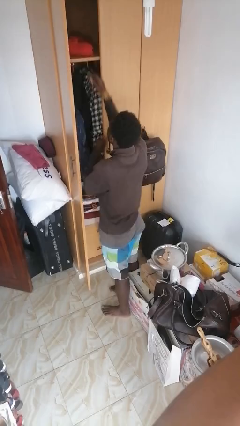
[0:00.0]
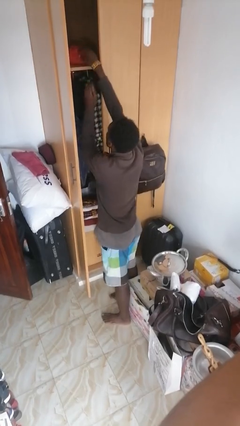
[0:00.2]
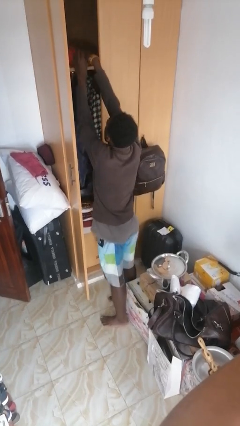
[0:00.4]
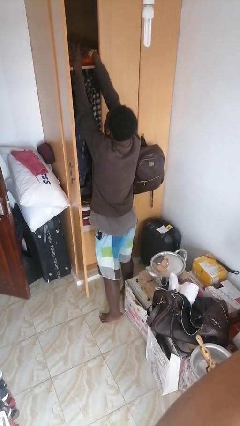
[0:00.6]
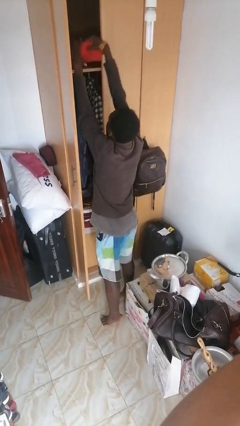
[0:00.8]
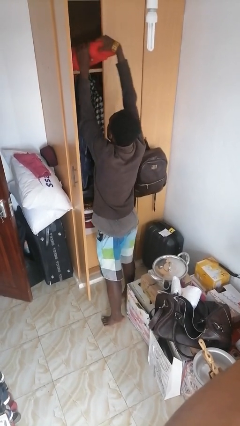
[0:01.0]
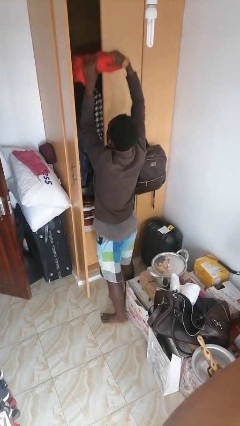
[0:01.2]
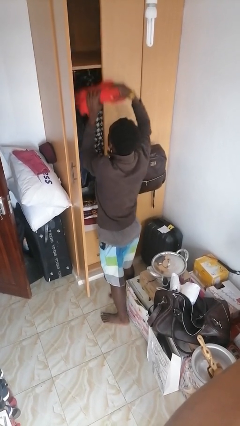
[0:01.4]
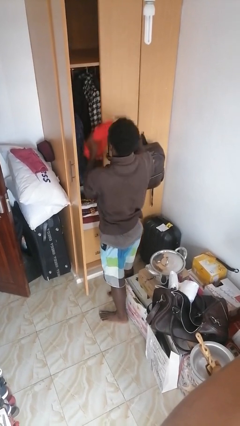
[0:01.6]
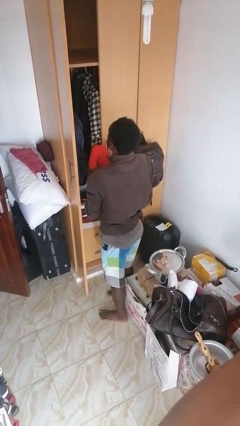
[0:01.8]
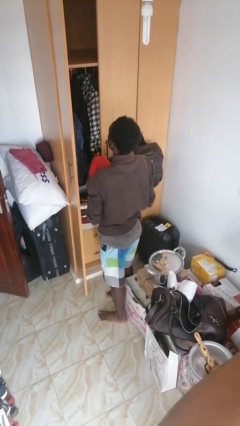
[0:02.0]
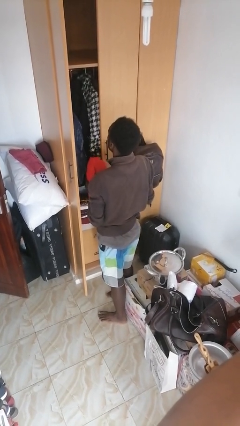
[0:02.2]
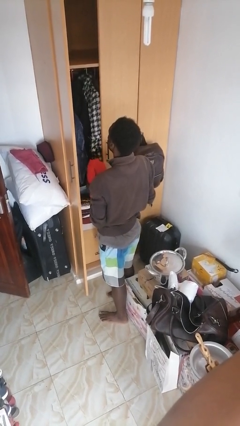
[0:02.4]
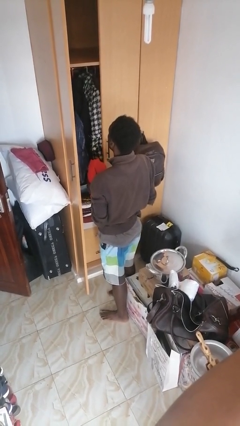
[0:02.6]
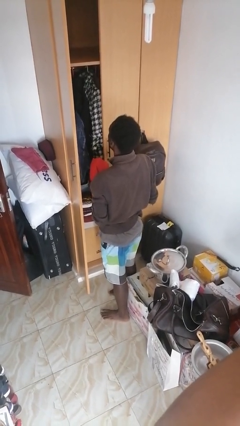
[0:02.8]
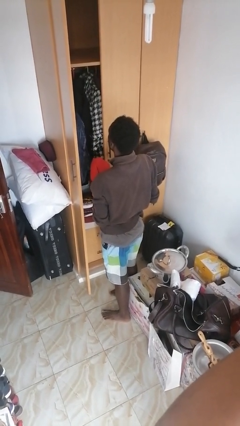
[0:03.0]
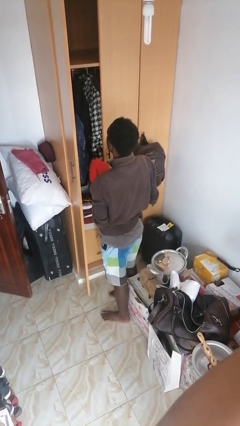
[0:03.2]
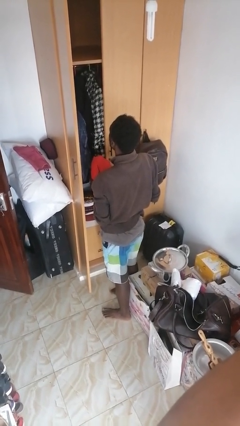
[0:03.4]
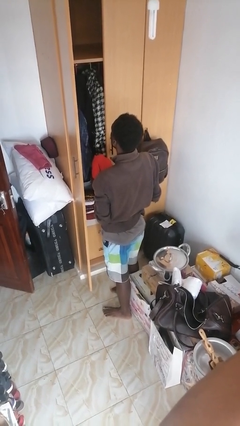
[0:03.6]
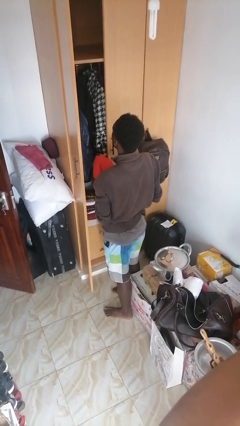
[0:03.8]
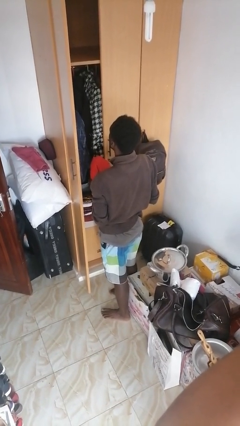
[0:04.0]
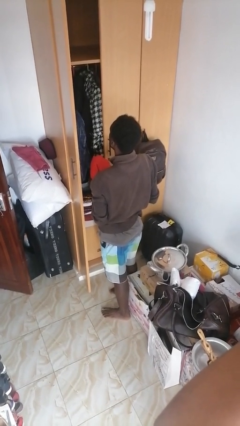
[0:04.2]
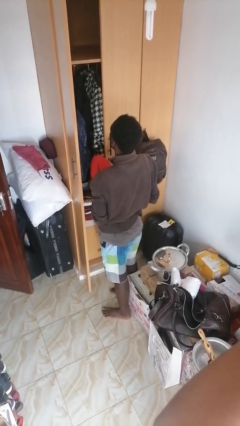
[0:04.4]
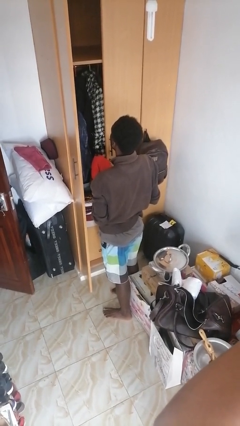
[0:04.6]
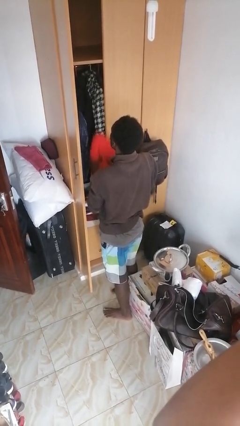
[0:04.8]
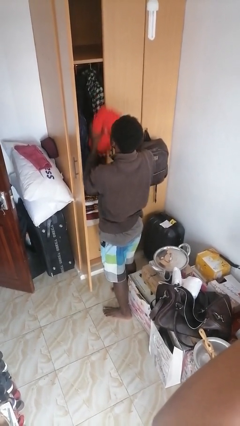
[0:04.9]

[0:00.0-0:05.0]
person picks up object from shelf

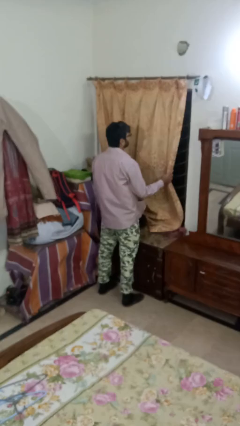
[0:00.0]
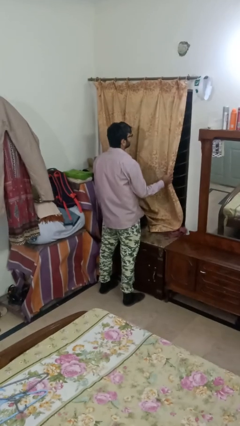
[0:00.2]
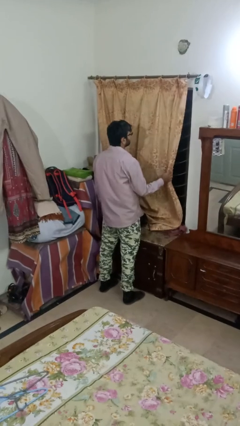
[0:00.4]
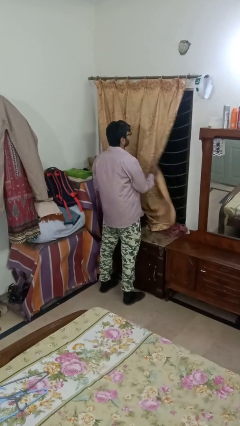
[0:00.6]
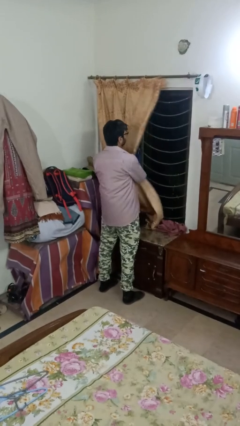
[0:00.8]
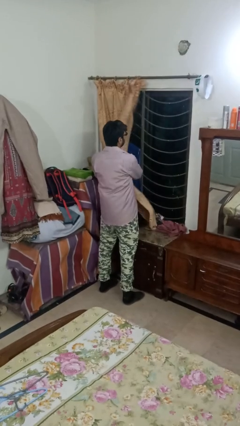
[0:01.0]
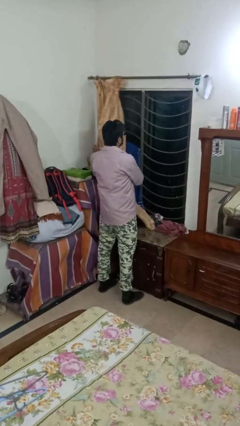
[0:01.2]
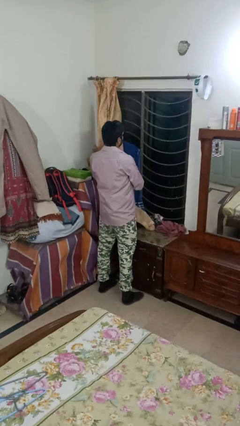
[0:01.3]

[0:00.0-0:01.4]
person opens curtains

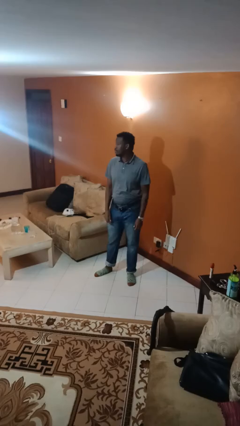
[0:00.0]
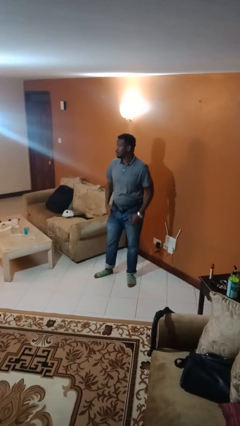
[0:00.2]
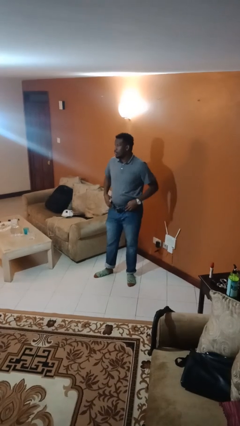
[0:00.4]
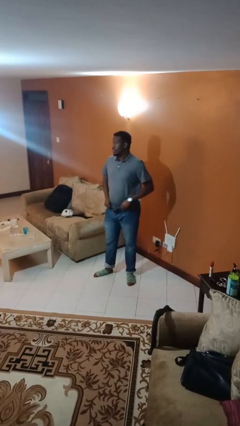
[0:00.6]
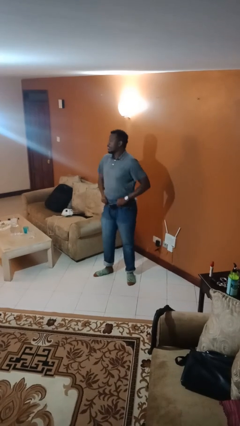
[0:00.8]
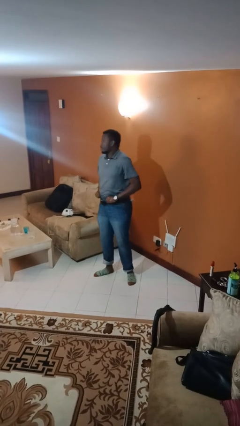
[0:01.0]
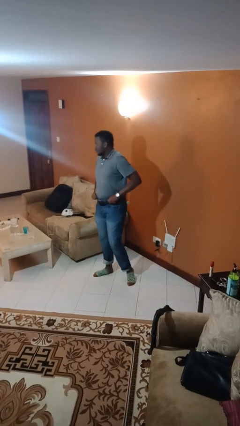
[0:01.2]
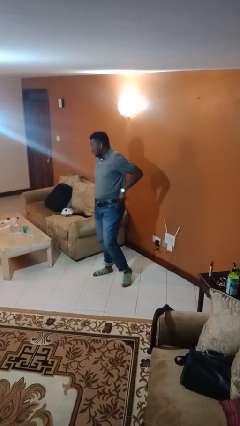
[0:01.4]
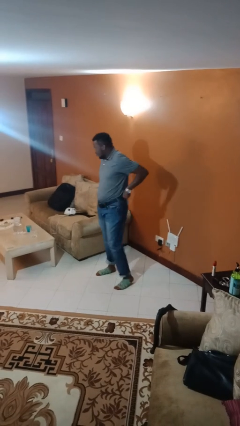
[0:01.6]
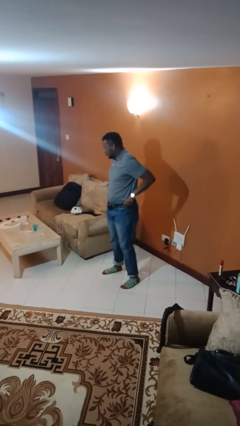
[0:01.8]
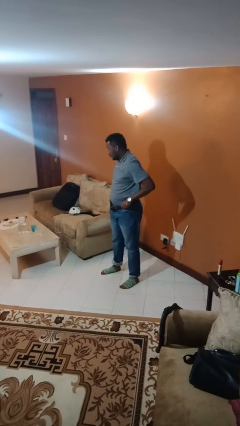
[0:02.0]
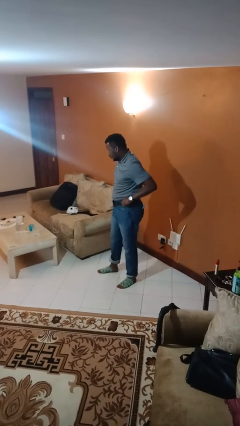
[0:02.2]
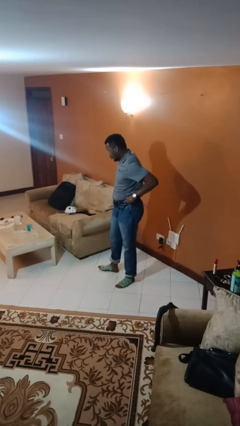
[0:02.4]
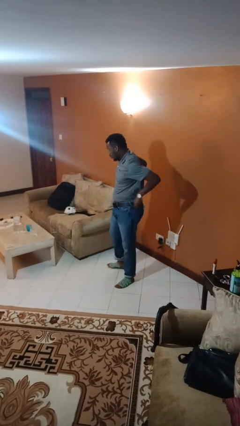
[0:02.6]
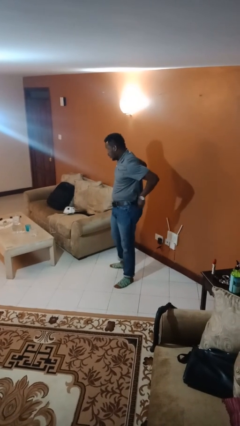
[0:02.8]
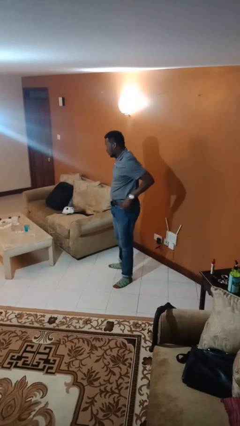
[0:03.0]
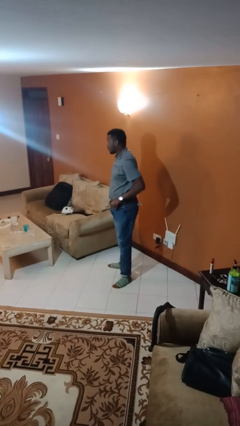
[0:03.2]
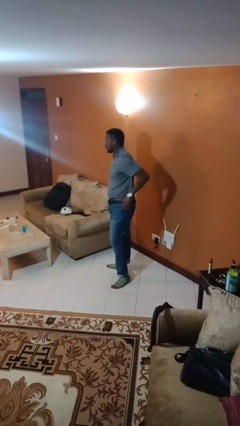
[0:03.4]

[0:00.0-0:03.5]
person hikes up pants

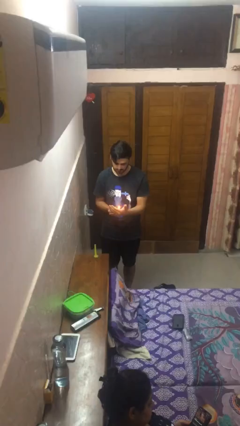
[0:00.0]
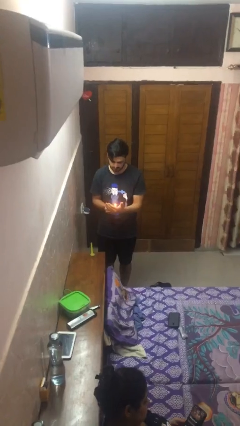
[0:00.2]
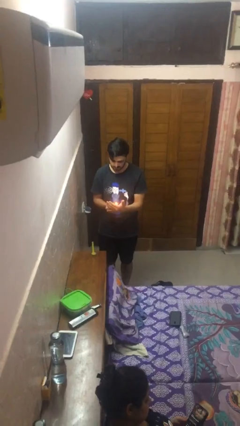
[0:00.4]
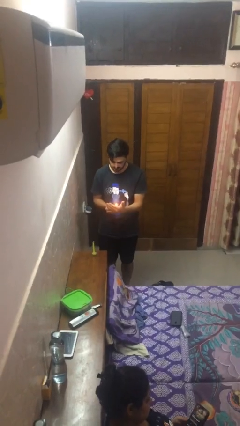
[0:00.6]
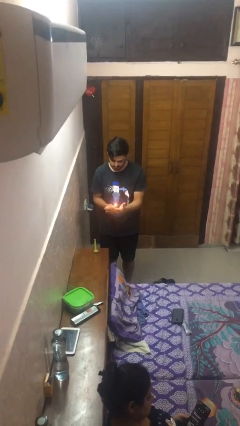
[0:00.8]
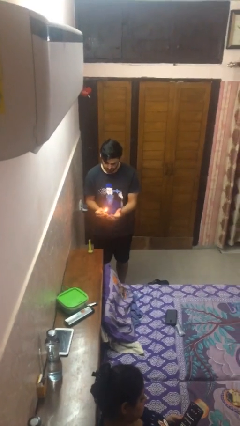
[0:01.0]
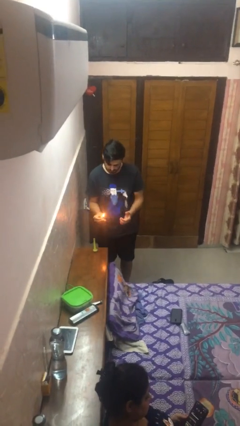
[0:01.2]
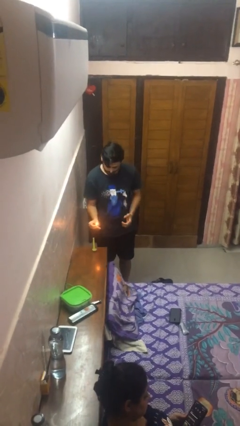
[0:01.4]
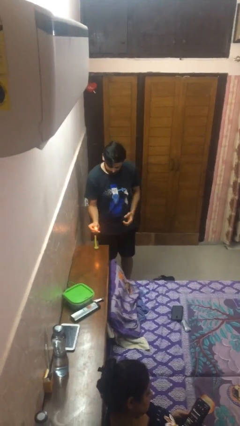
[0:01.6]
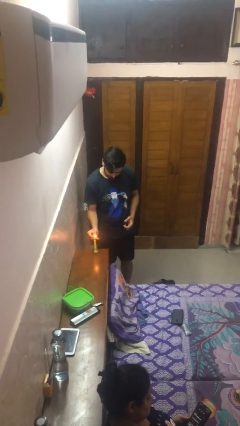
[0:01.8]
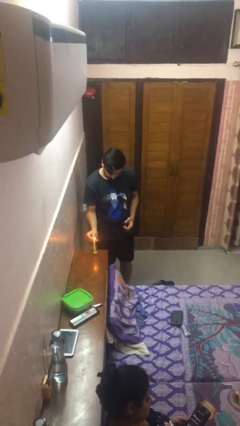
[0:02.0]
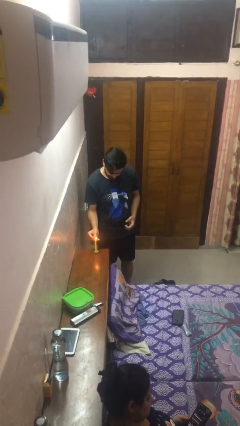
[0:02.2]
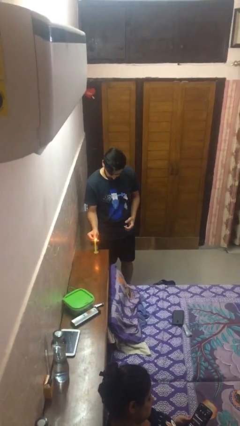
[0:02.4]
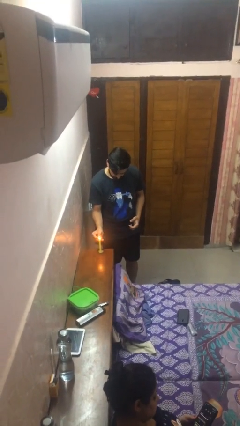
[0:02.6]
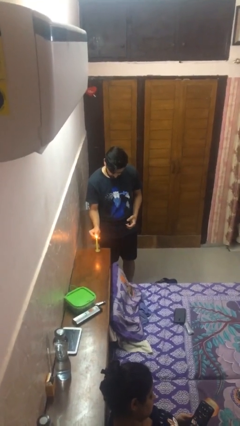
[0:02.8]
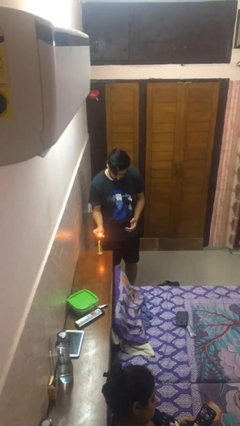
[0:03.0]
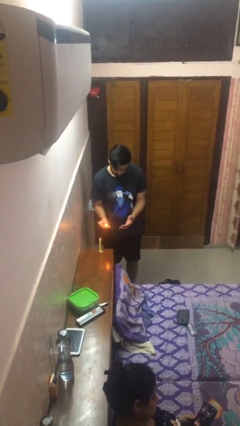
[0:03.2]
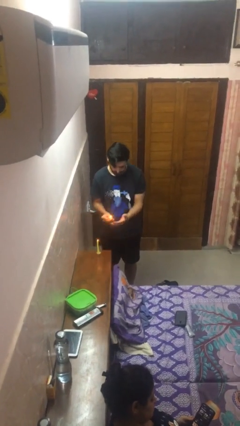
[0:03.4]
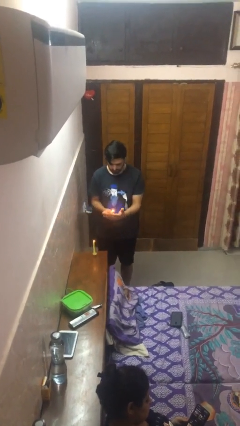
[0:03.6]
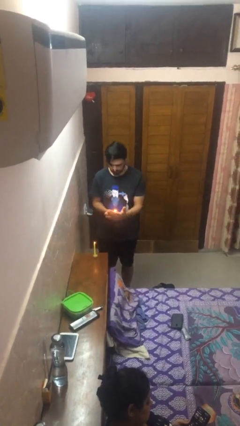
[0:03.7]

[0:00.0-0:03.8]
person lights candle

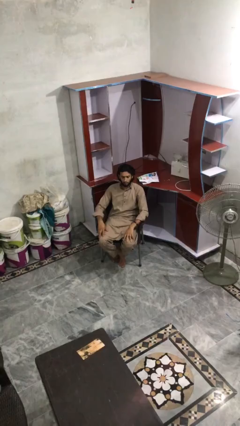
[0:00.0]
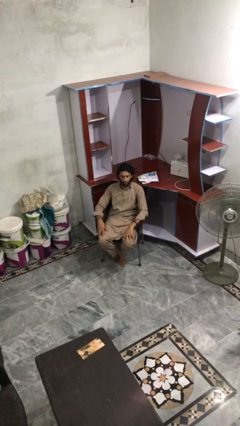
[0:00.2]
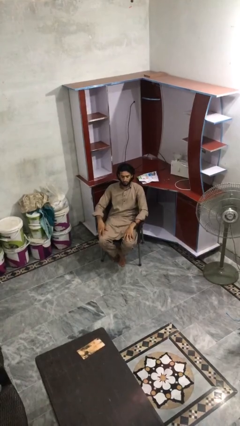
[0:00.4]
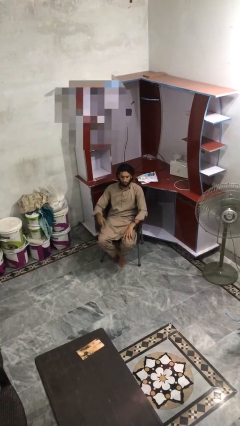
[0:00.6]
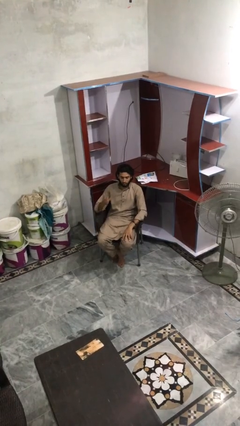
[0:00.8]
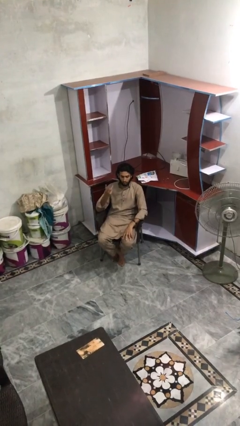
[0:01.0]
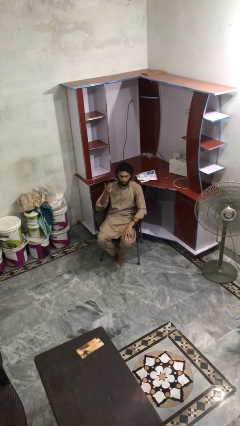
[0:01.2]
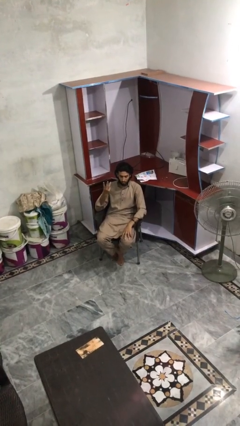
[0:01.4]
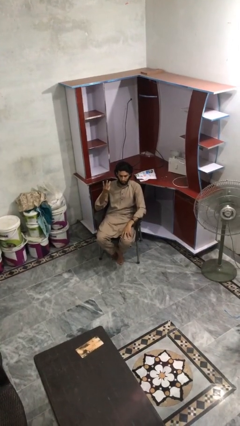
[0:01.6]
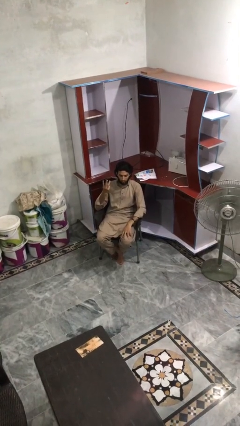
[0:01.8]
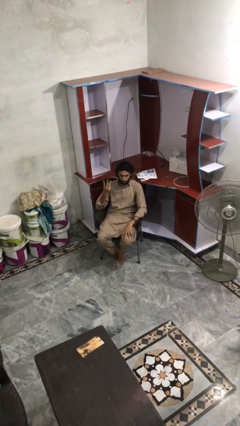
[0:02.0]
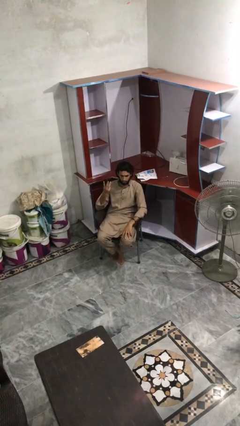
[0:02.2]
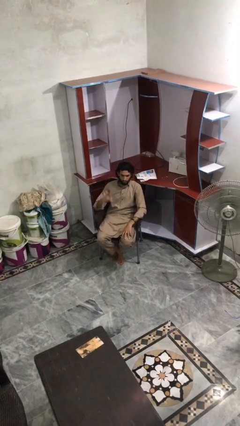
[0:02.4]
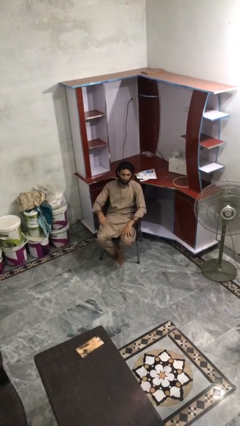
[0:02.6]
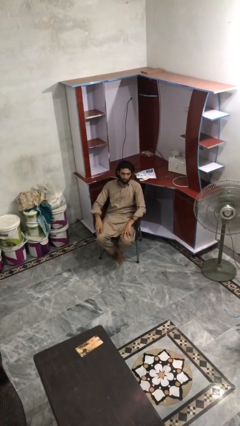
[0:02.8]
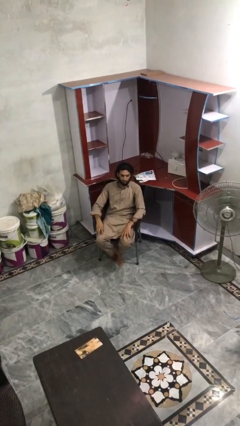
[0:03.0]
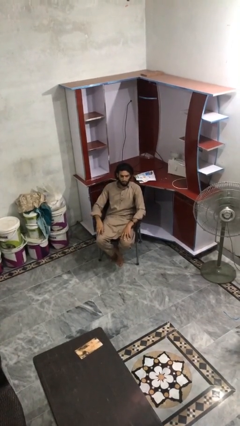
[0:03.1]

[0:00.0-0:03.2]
person gestures number three

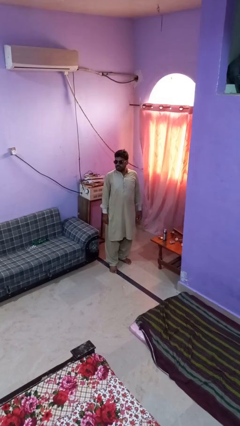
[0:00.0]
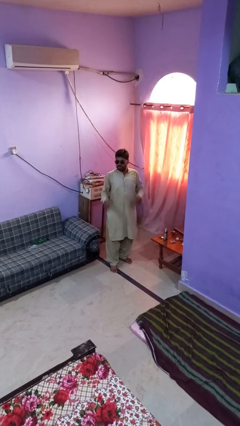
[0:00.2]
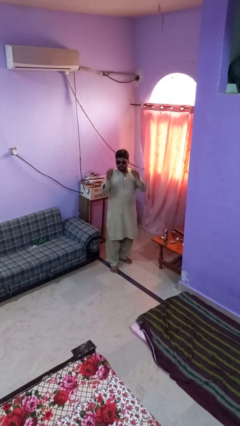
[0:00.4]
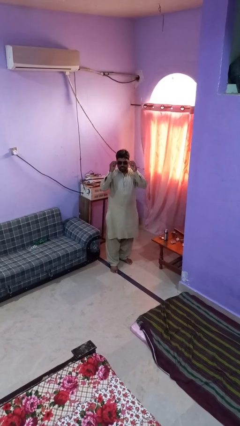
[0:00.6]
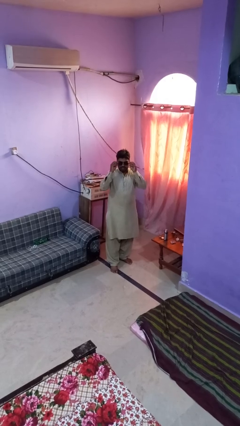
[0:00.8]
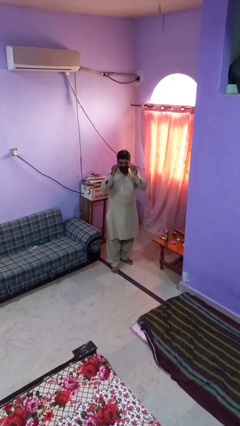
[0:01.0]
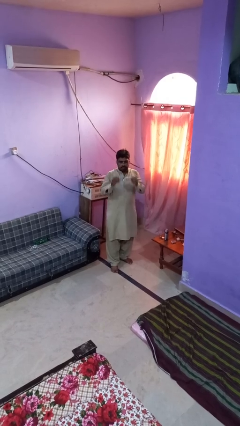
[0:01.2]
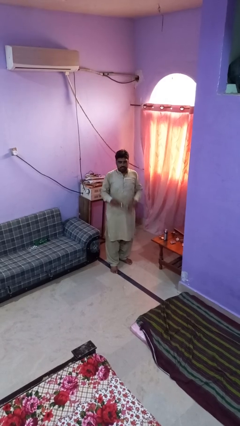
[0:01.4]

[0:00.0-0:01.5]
person takes off sunglasses
